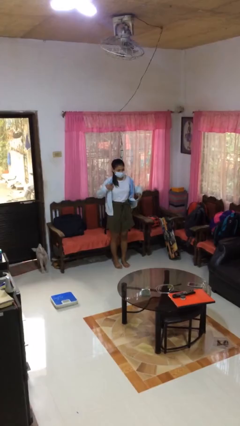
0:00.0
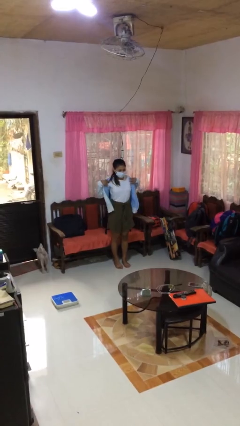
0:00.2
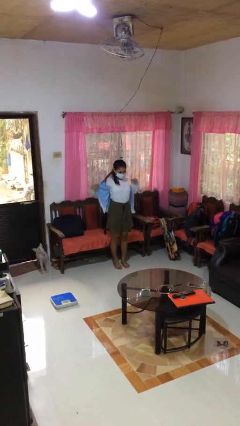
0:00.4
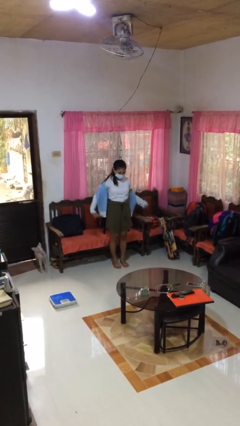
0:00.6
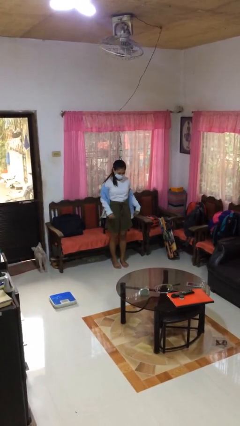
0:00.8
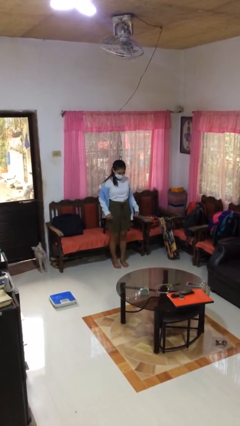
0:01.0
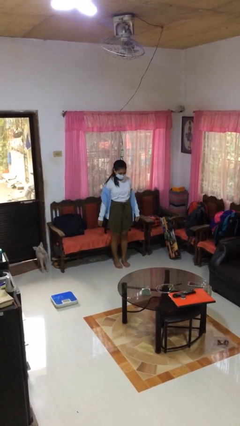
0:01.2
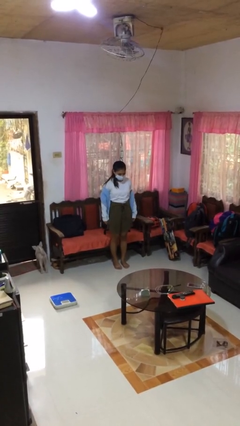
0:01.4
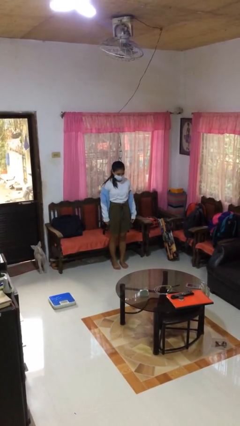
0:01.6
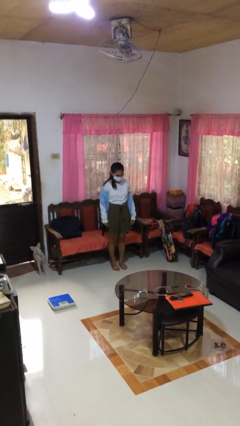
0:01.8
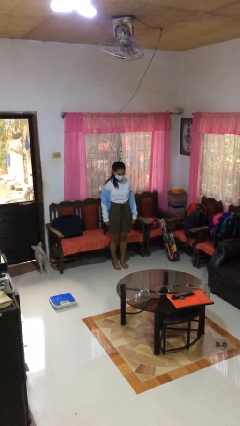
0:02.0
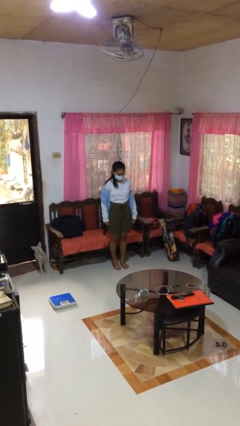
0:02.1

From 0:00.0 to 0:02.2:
person takes off jacket

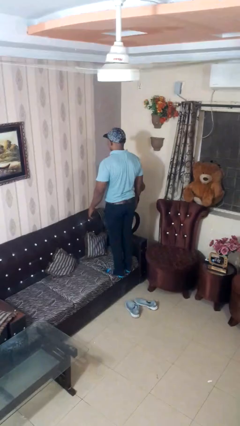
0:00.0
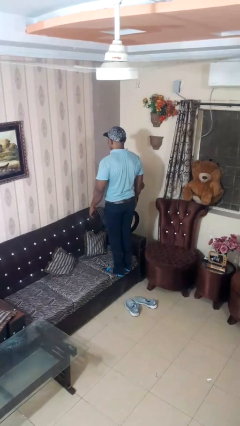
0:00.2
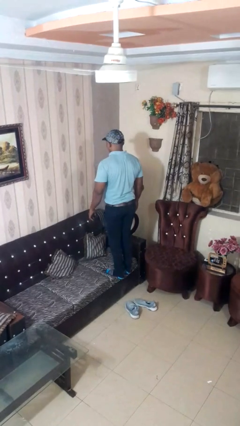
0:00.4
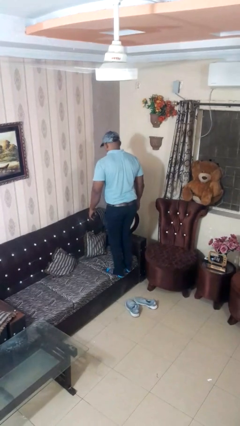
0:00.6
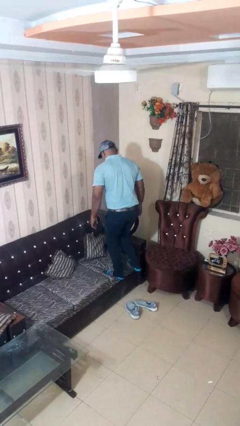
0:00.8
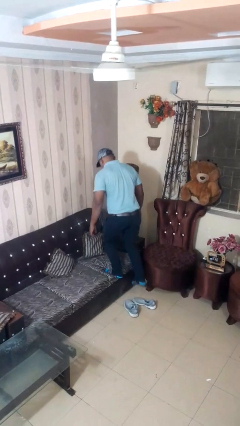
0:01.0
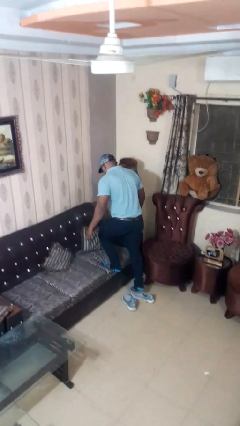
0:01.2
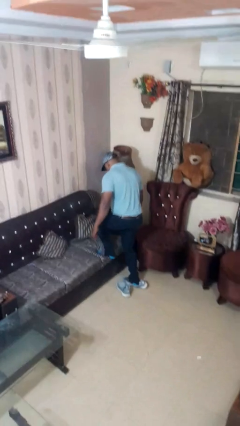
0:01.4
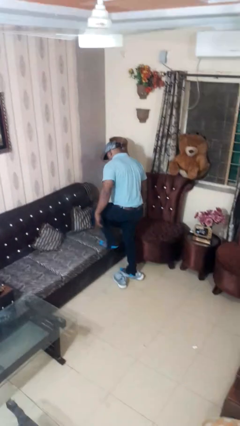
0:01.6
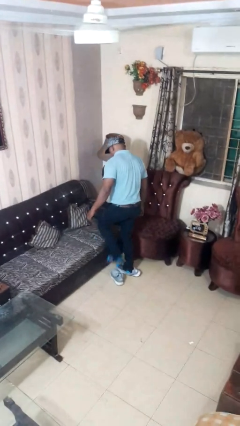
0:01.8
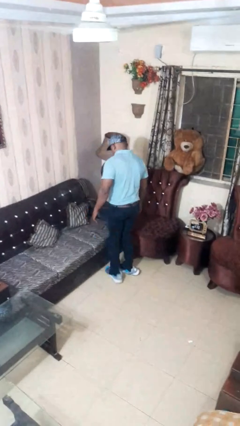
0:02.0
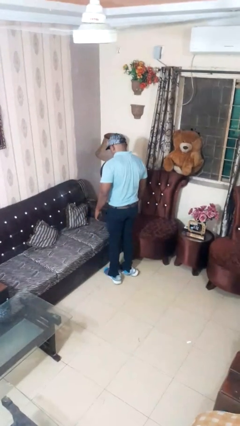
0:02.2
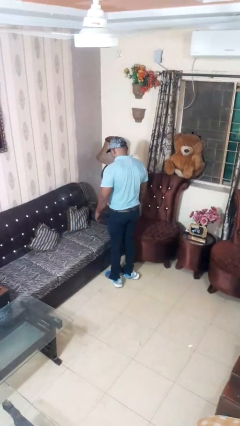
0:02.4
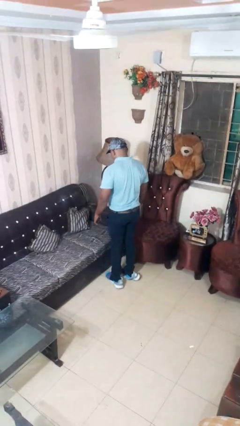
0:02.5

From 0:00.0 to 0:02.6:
person climbs off couch

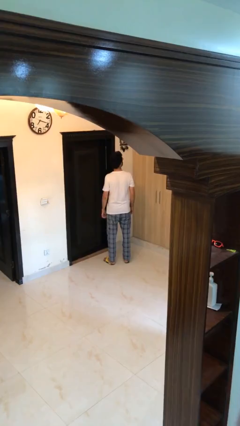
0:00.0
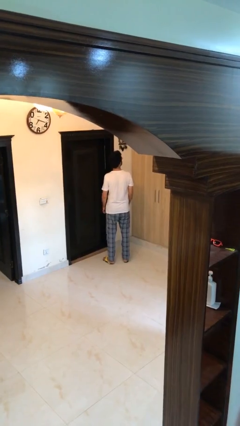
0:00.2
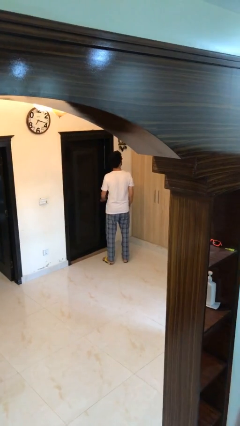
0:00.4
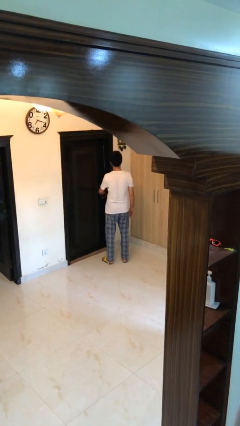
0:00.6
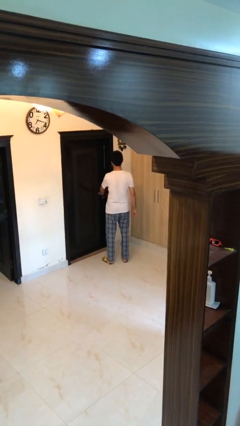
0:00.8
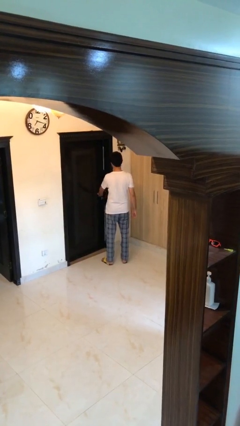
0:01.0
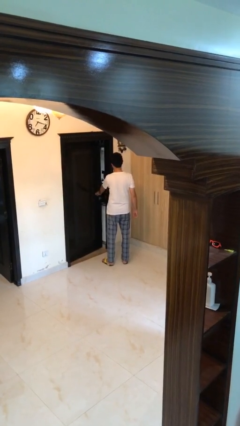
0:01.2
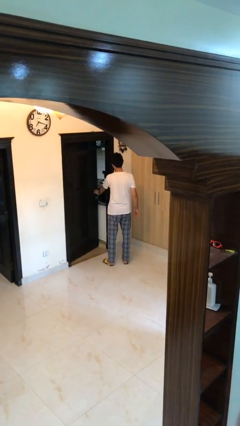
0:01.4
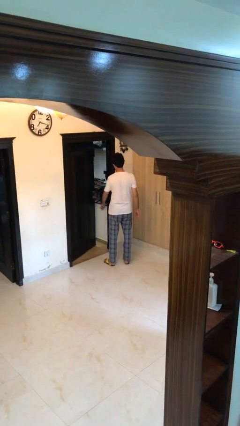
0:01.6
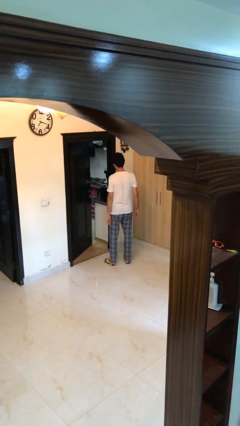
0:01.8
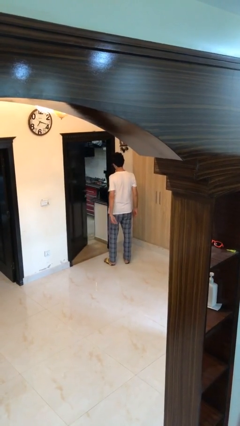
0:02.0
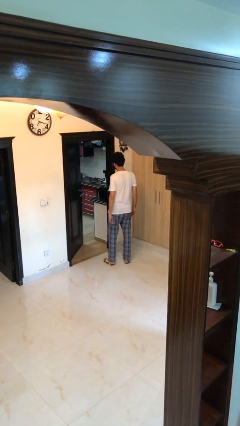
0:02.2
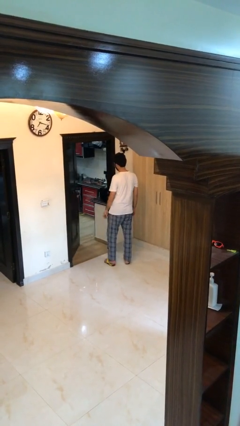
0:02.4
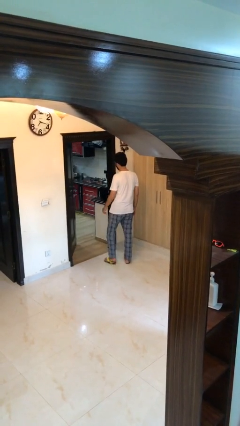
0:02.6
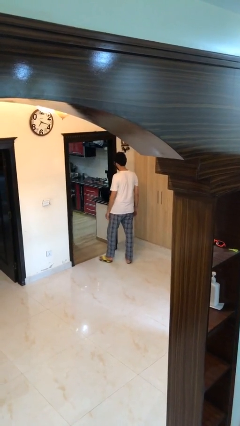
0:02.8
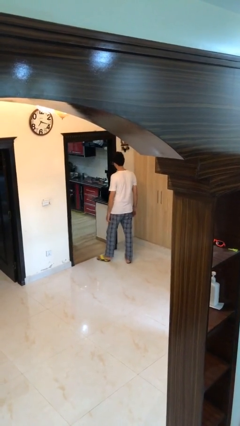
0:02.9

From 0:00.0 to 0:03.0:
person opens facility door

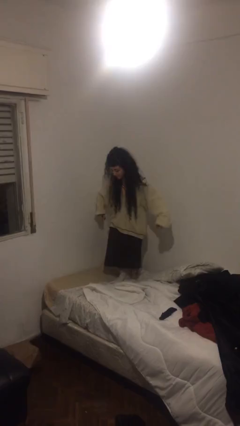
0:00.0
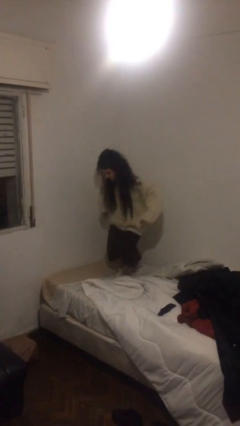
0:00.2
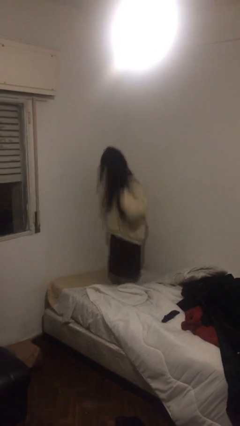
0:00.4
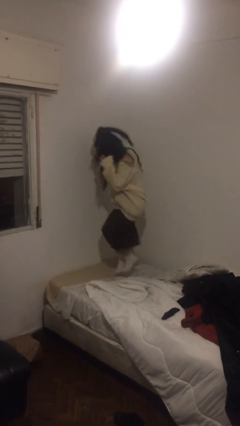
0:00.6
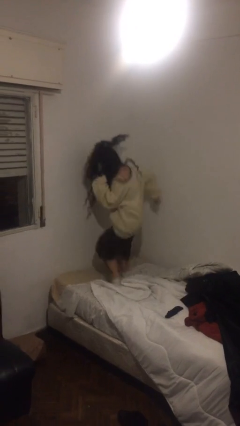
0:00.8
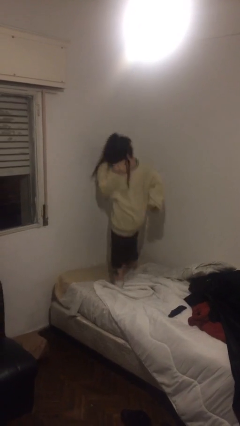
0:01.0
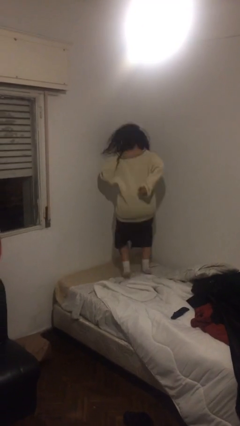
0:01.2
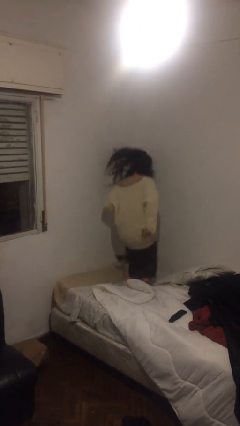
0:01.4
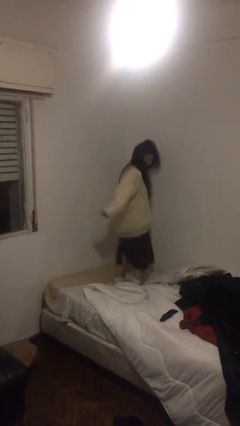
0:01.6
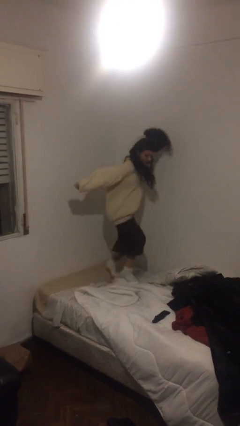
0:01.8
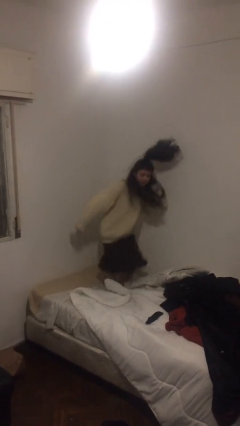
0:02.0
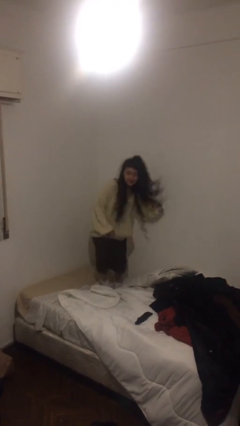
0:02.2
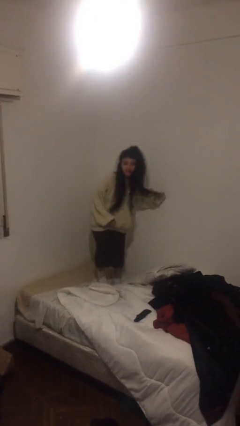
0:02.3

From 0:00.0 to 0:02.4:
person jumps on bed

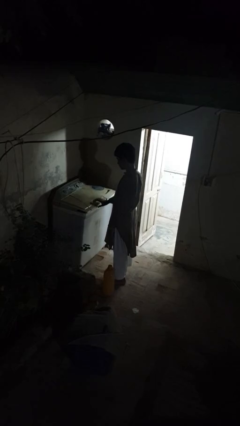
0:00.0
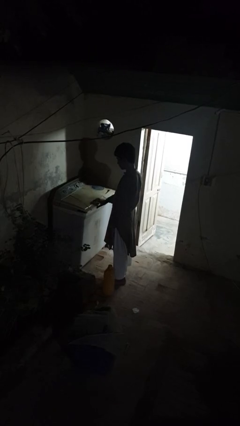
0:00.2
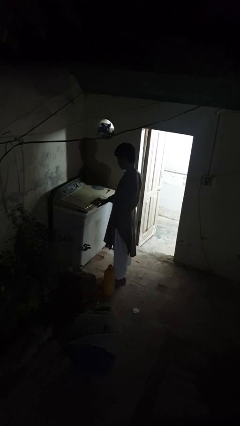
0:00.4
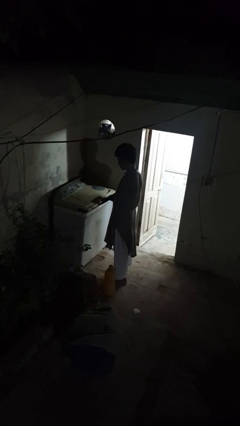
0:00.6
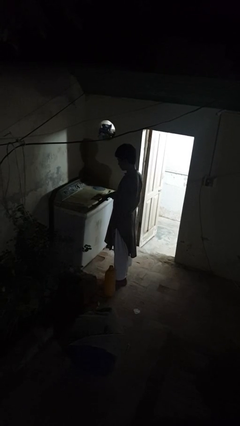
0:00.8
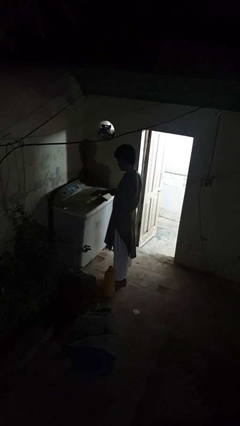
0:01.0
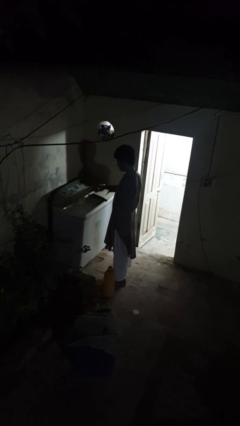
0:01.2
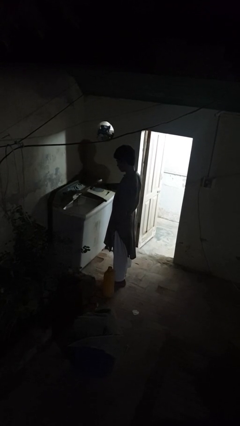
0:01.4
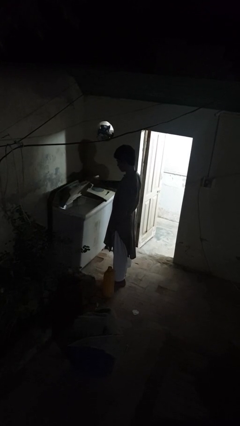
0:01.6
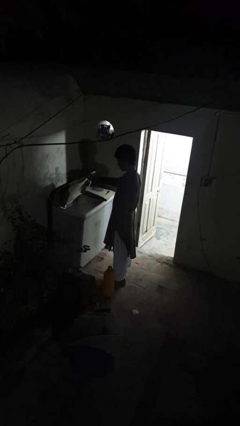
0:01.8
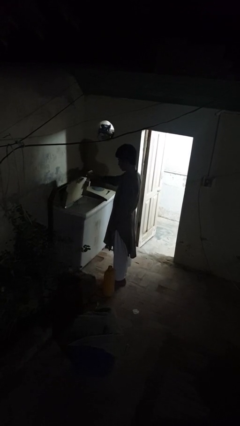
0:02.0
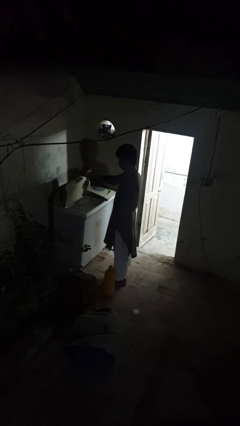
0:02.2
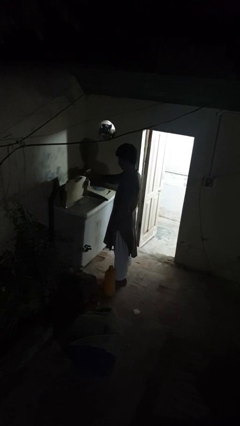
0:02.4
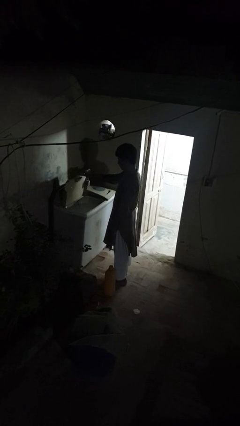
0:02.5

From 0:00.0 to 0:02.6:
person opens clothes washer

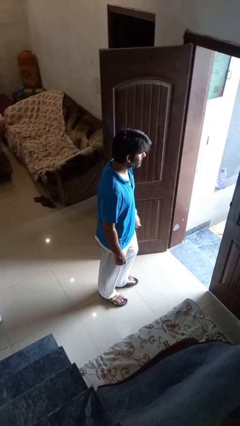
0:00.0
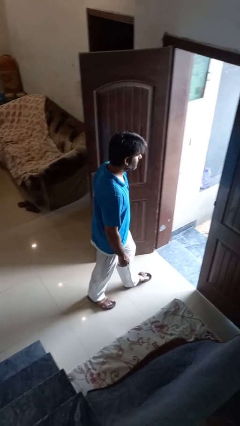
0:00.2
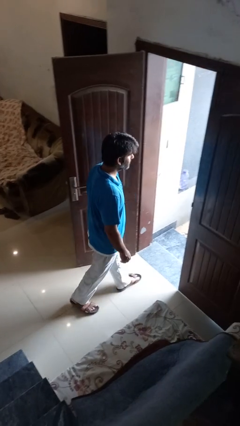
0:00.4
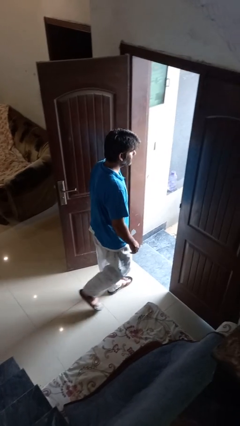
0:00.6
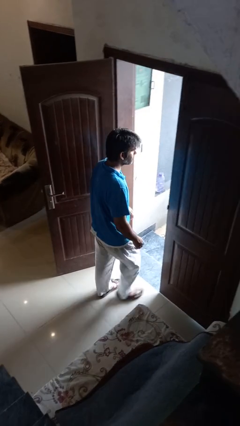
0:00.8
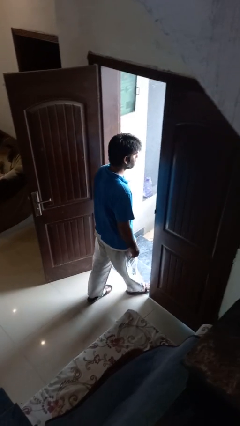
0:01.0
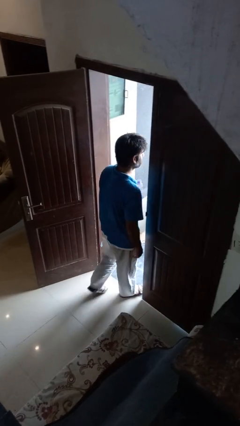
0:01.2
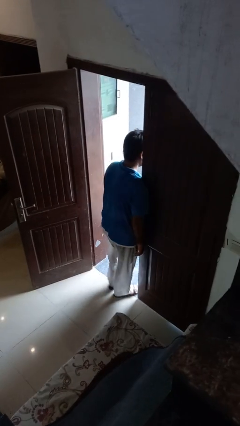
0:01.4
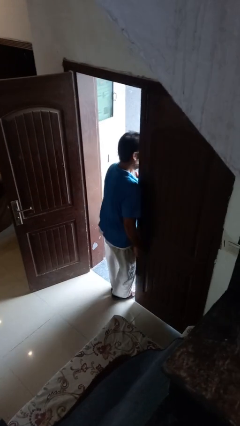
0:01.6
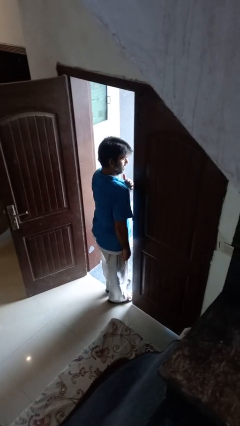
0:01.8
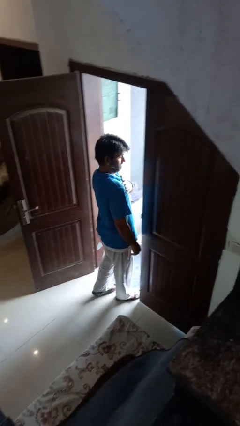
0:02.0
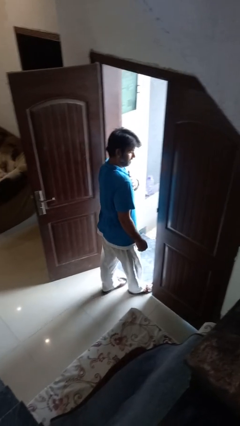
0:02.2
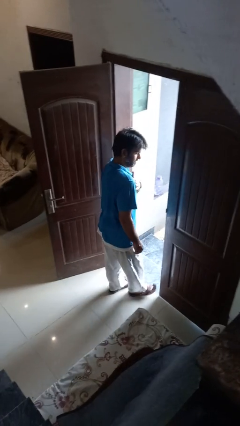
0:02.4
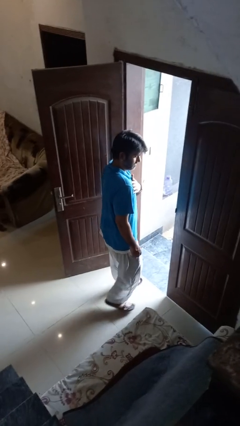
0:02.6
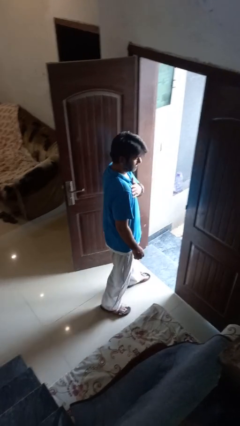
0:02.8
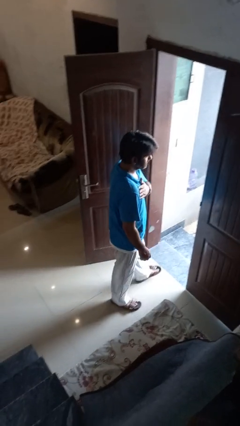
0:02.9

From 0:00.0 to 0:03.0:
person bumps into wall

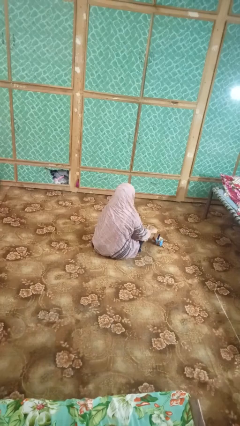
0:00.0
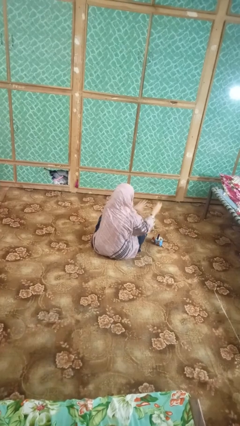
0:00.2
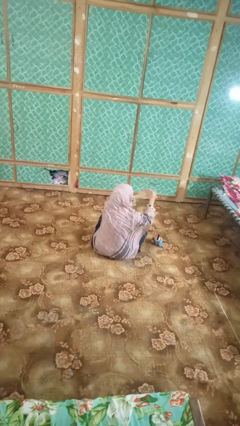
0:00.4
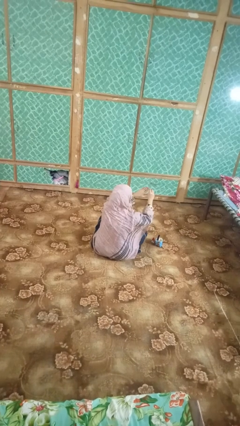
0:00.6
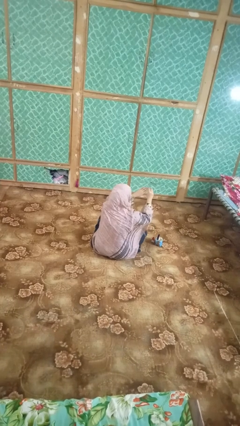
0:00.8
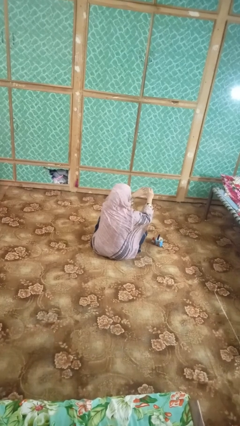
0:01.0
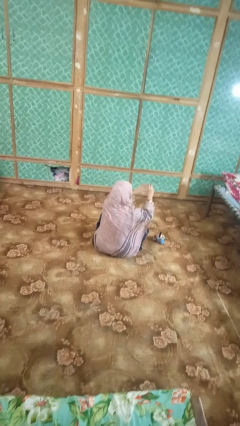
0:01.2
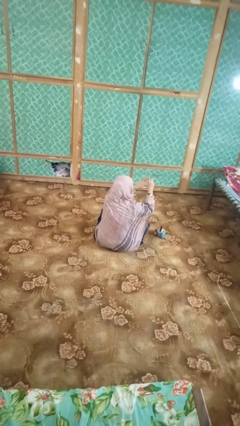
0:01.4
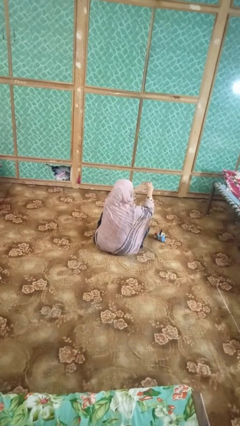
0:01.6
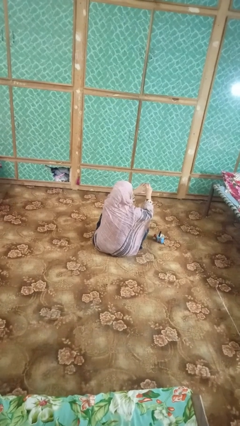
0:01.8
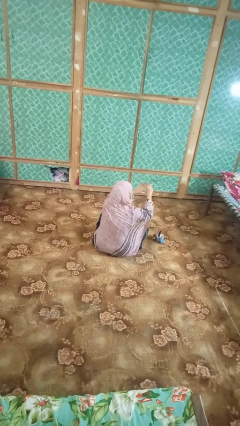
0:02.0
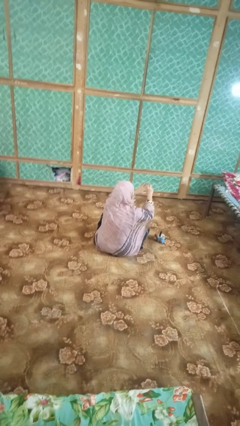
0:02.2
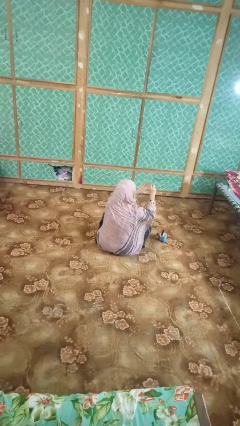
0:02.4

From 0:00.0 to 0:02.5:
person paints fingernails
